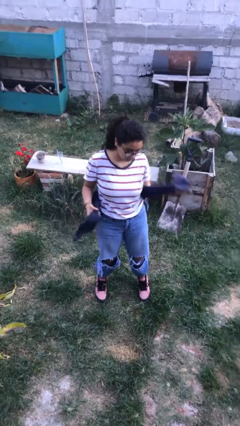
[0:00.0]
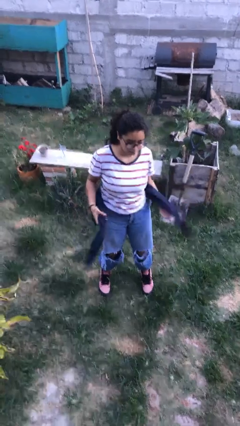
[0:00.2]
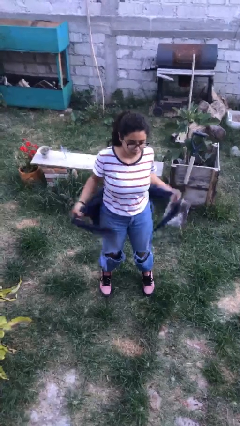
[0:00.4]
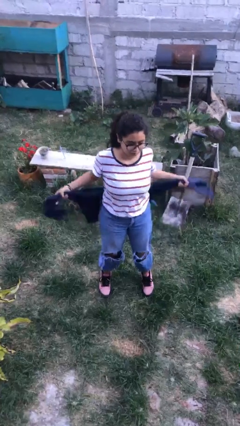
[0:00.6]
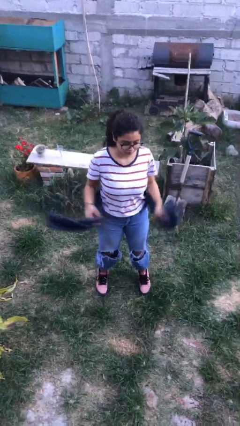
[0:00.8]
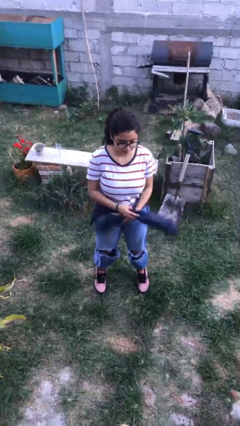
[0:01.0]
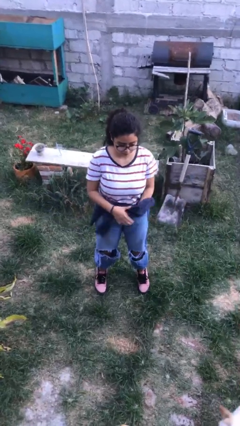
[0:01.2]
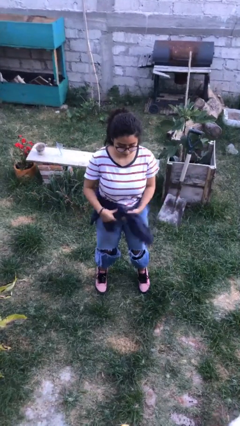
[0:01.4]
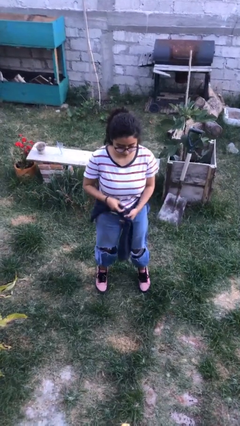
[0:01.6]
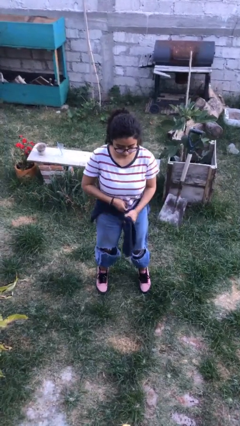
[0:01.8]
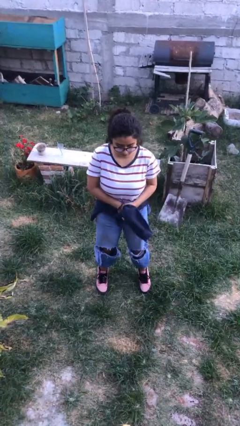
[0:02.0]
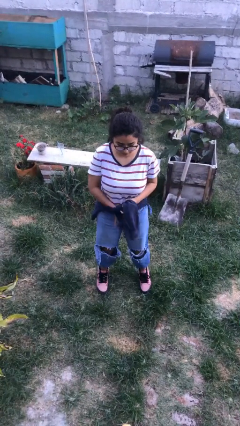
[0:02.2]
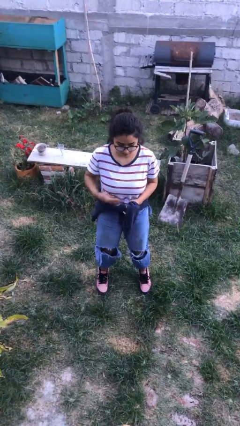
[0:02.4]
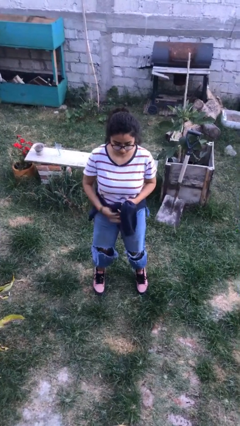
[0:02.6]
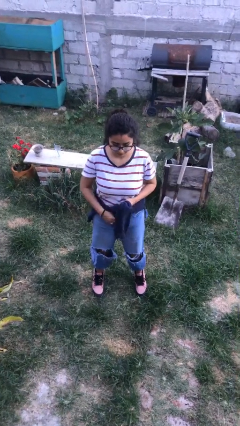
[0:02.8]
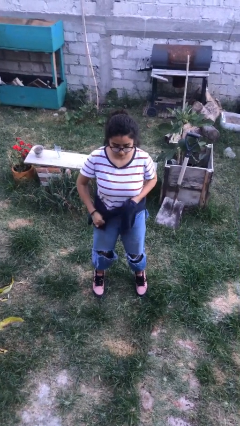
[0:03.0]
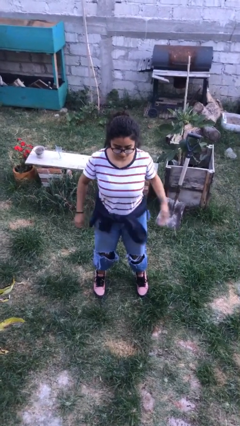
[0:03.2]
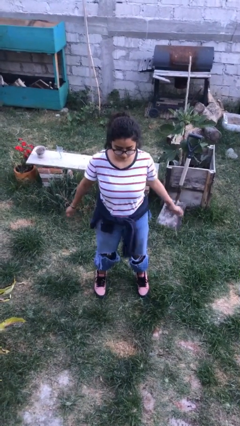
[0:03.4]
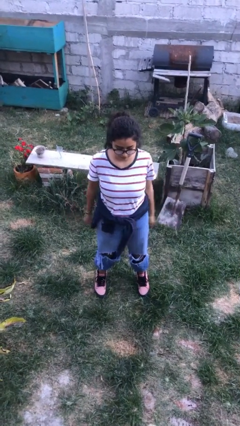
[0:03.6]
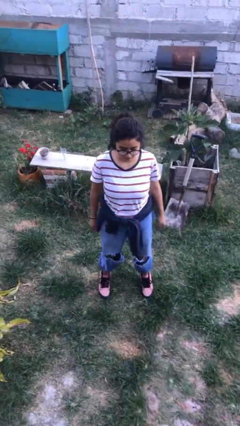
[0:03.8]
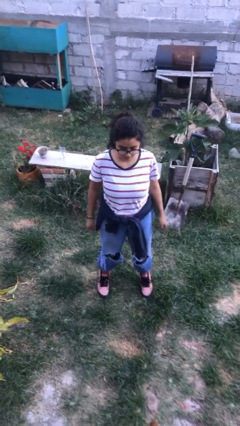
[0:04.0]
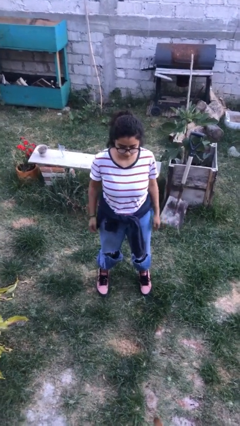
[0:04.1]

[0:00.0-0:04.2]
person ties jacket around waist

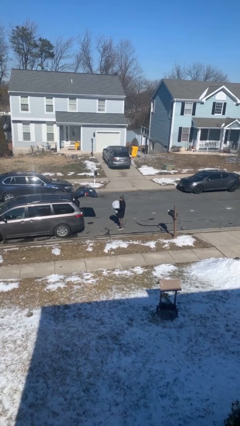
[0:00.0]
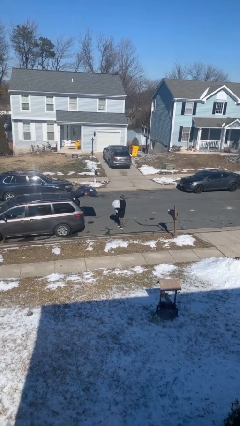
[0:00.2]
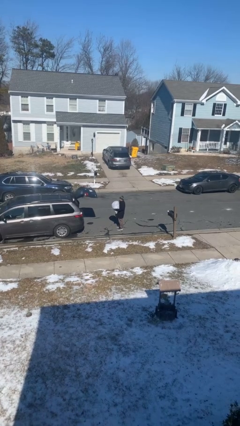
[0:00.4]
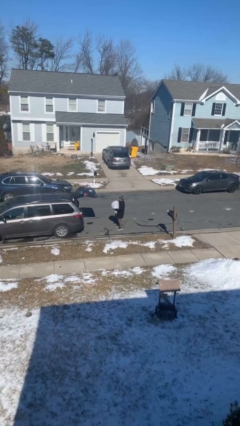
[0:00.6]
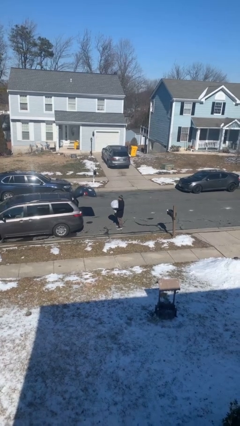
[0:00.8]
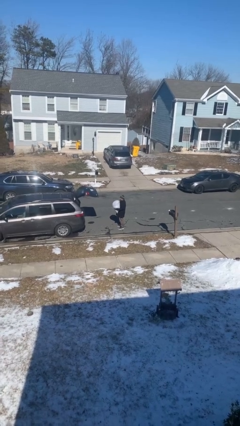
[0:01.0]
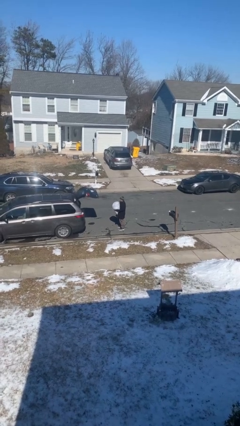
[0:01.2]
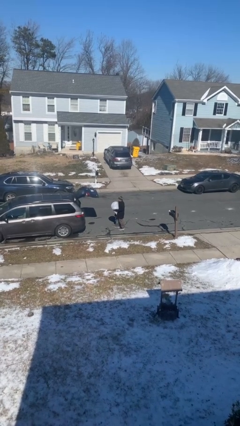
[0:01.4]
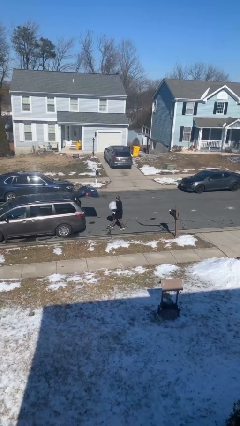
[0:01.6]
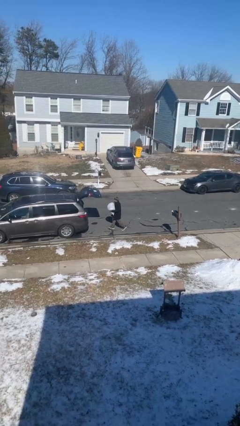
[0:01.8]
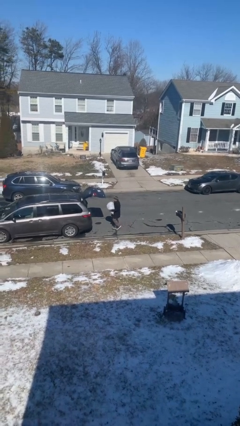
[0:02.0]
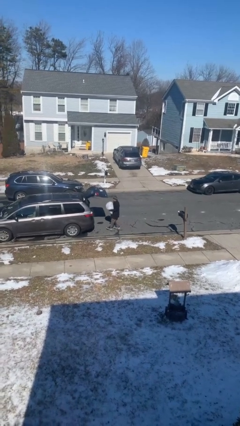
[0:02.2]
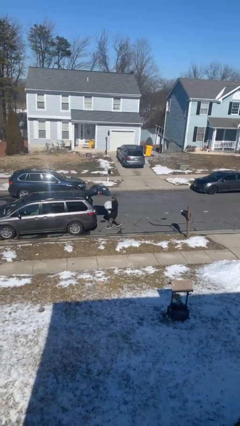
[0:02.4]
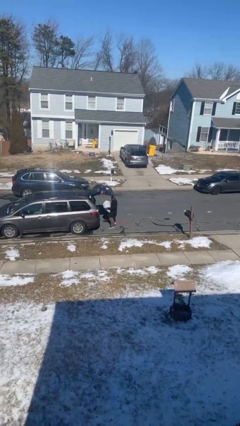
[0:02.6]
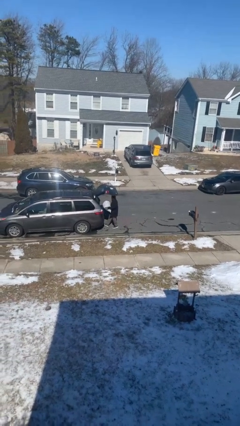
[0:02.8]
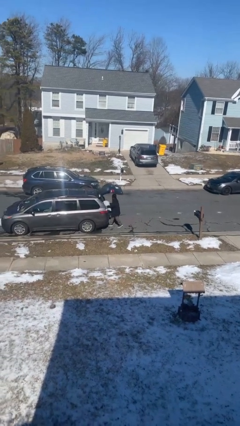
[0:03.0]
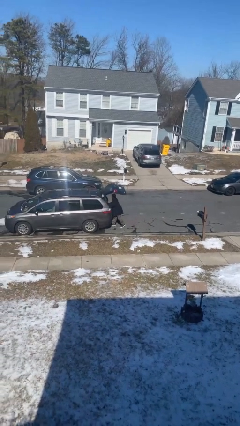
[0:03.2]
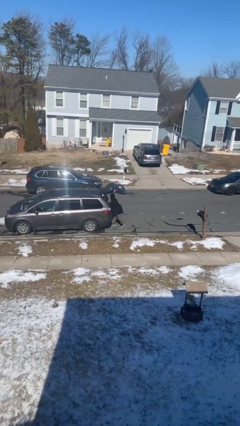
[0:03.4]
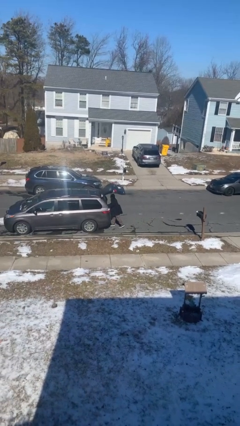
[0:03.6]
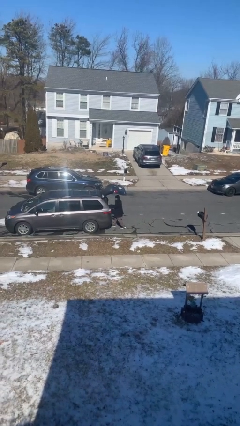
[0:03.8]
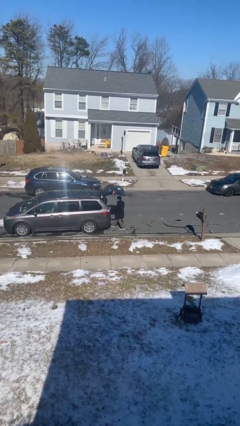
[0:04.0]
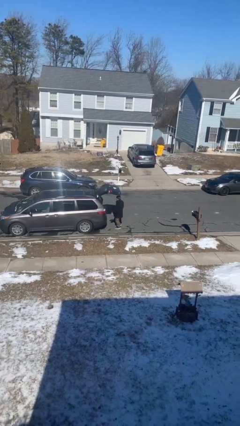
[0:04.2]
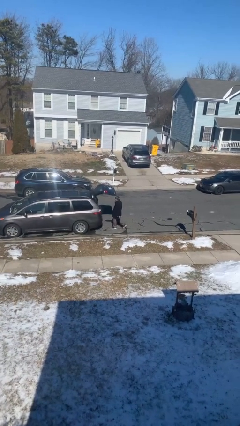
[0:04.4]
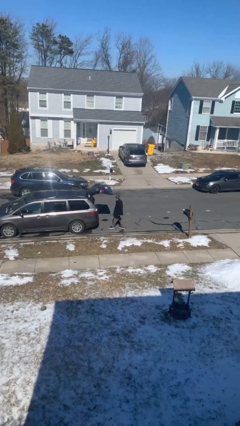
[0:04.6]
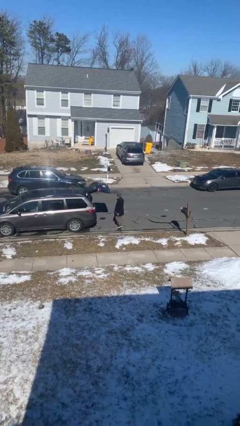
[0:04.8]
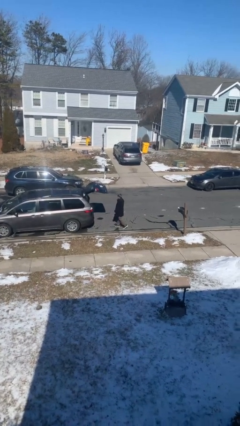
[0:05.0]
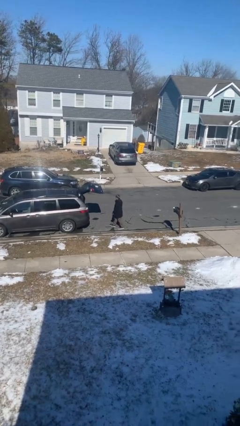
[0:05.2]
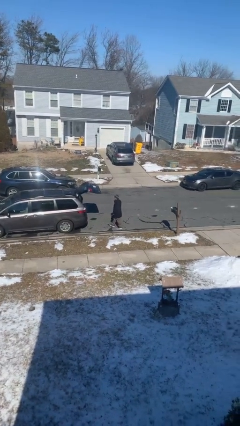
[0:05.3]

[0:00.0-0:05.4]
person loads car

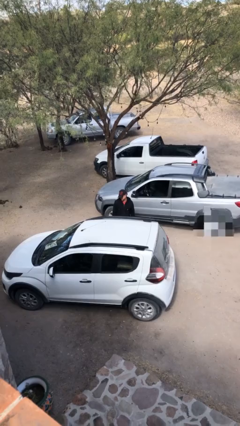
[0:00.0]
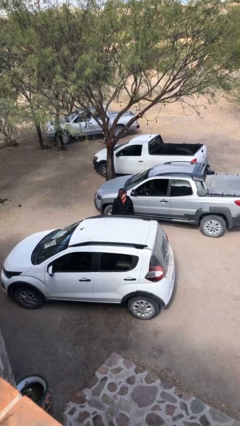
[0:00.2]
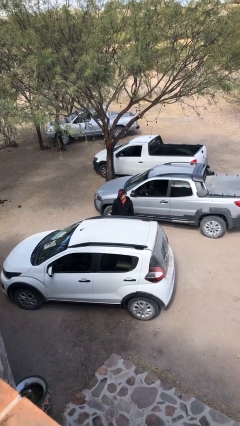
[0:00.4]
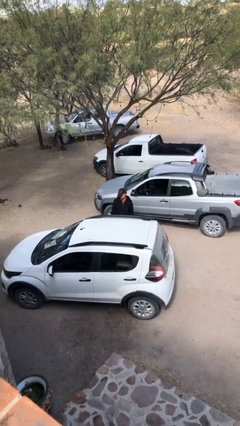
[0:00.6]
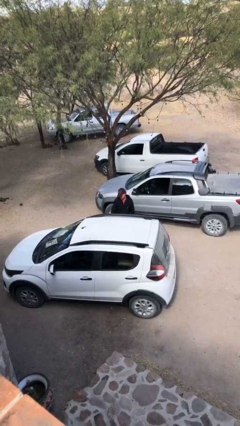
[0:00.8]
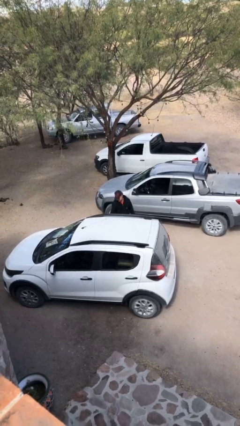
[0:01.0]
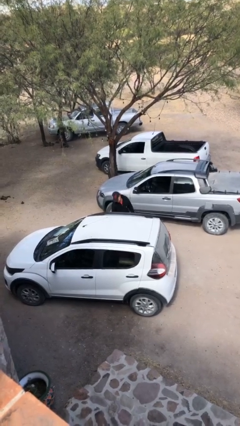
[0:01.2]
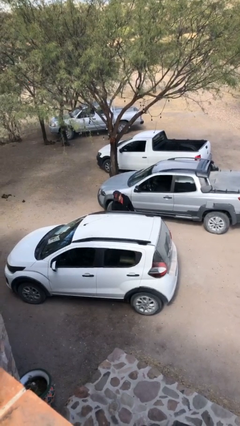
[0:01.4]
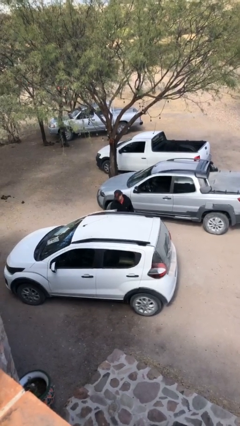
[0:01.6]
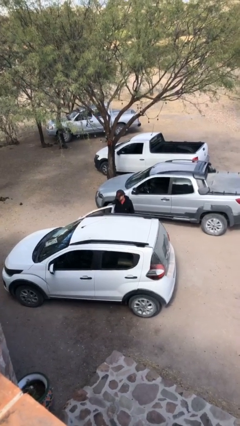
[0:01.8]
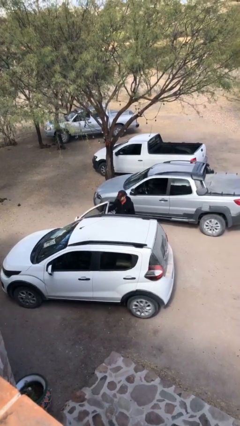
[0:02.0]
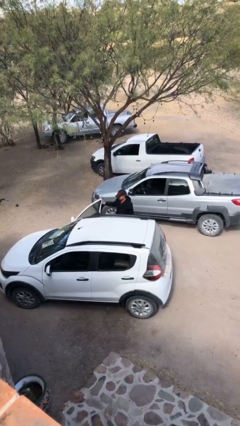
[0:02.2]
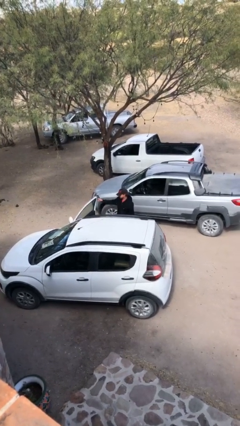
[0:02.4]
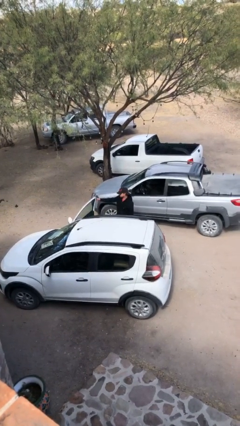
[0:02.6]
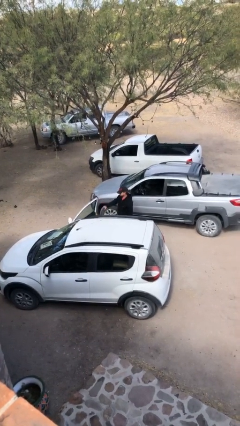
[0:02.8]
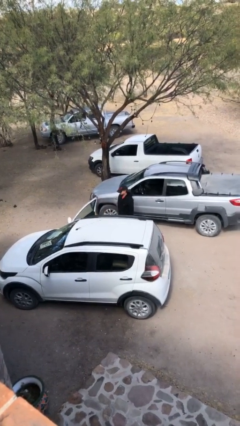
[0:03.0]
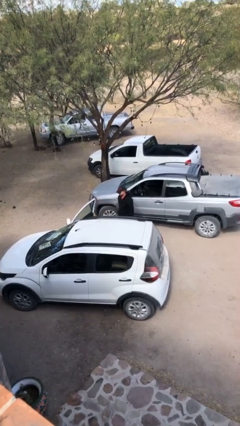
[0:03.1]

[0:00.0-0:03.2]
person opens car door

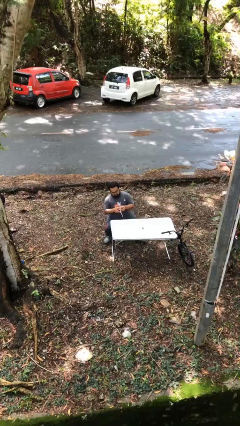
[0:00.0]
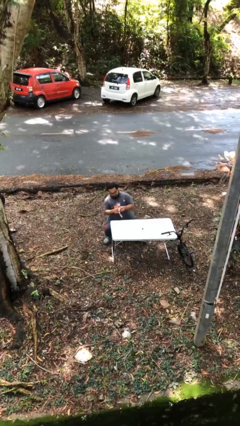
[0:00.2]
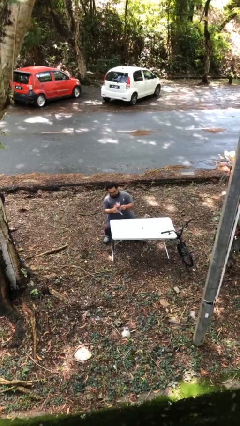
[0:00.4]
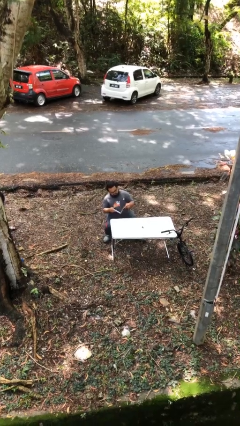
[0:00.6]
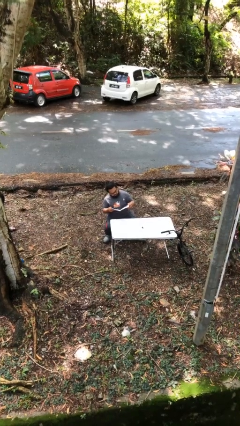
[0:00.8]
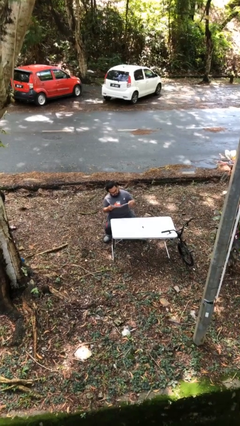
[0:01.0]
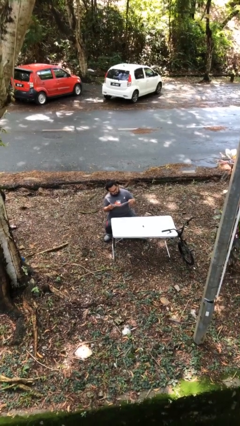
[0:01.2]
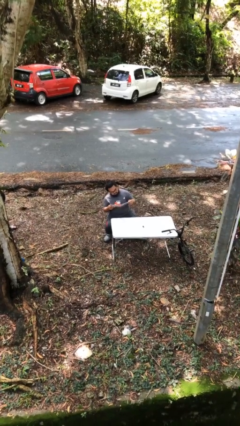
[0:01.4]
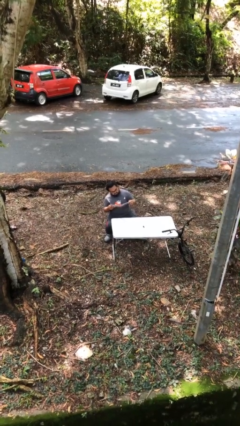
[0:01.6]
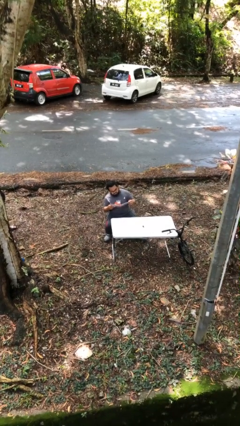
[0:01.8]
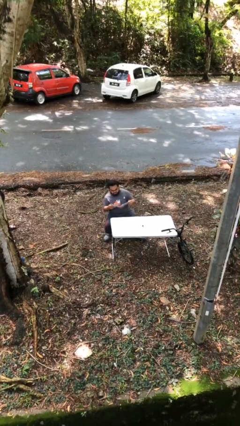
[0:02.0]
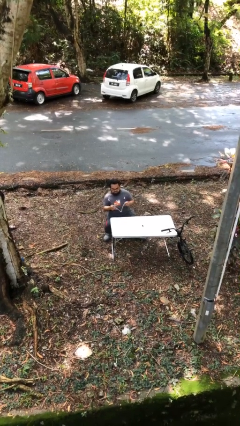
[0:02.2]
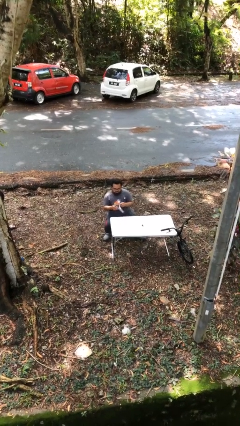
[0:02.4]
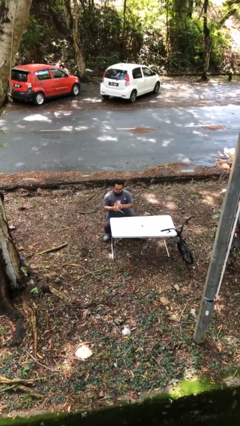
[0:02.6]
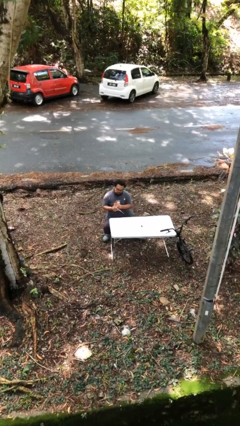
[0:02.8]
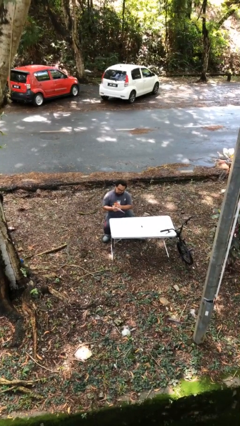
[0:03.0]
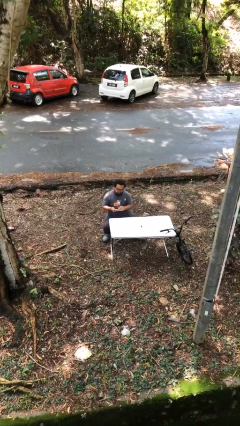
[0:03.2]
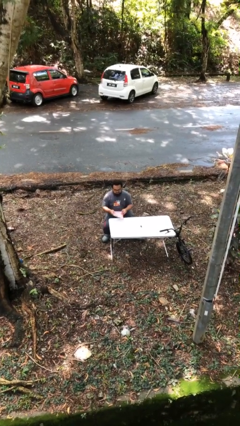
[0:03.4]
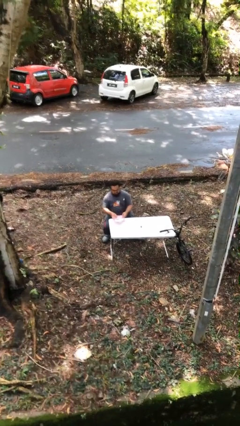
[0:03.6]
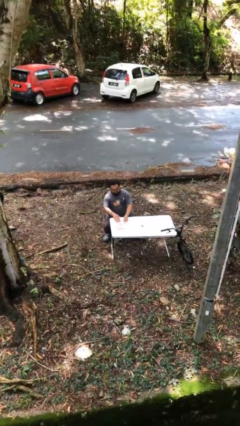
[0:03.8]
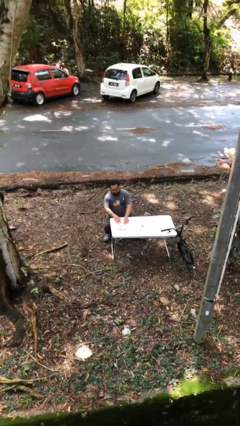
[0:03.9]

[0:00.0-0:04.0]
person reads document

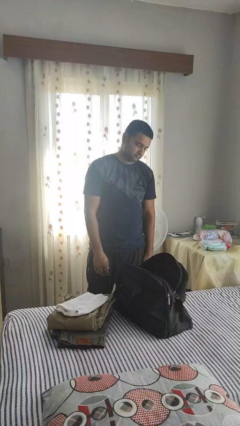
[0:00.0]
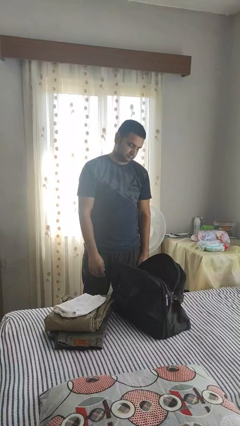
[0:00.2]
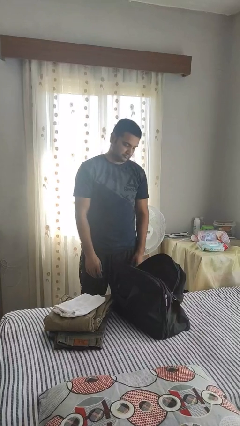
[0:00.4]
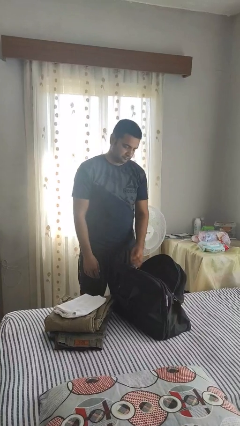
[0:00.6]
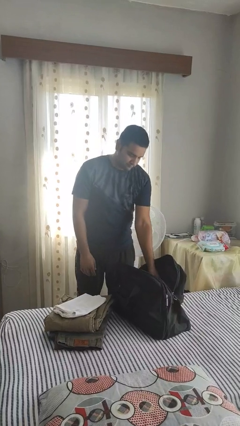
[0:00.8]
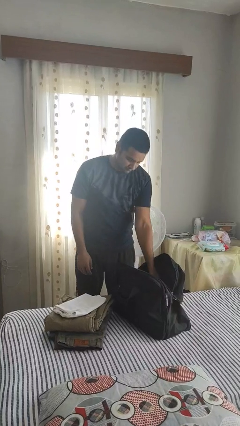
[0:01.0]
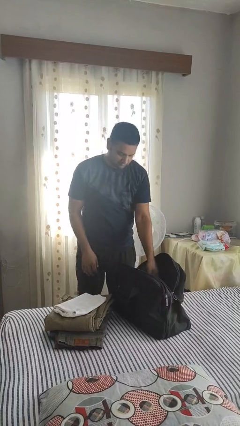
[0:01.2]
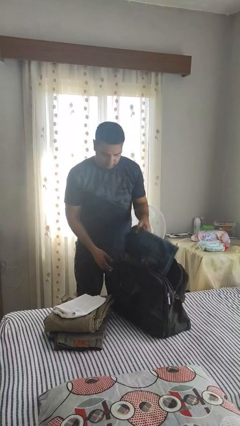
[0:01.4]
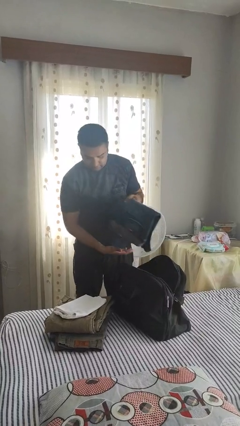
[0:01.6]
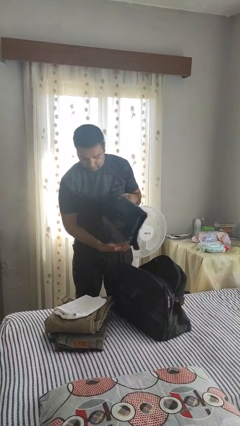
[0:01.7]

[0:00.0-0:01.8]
person unloads clothes from suitcase
